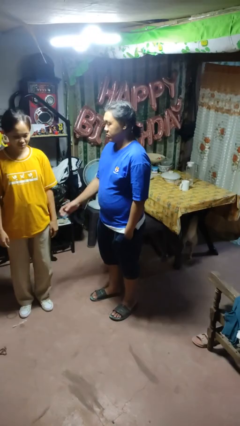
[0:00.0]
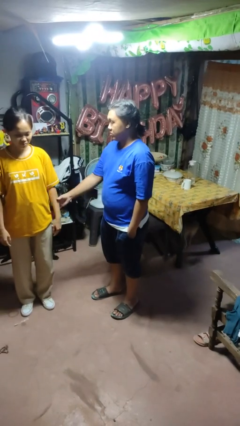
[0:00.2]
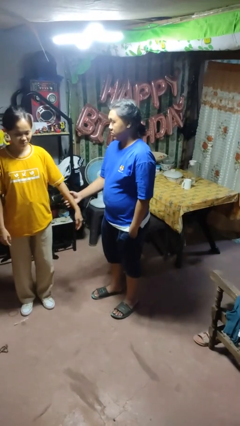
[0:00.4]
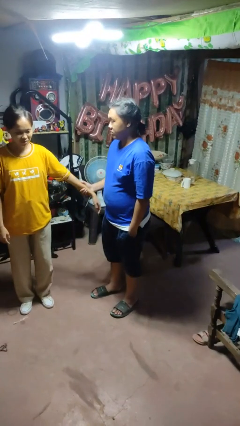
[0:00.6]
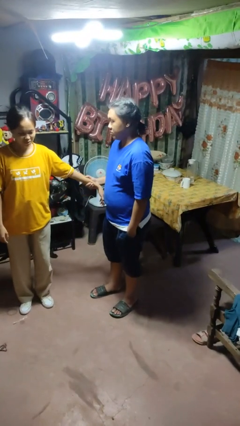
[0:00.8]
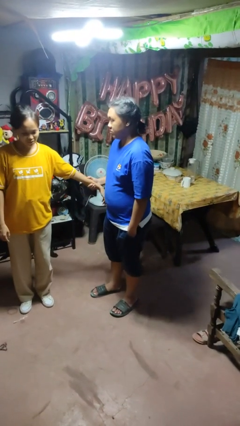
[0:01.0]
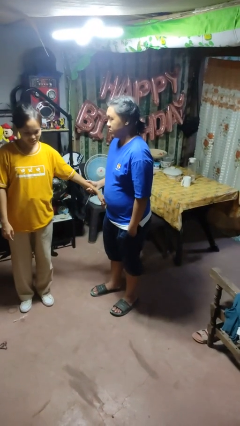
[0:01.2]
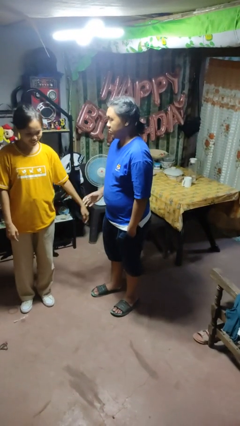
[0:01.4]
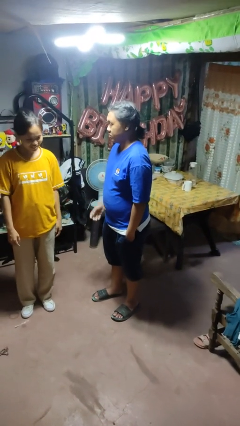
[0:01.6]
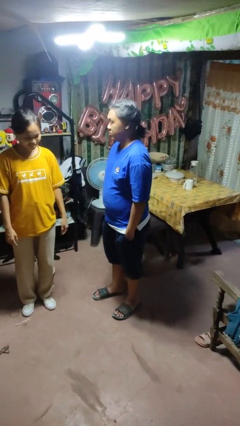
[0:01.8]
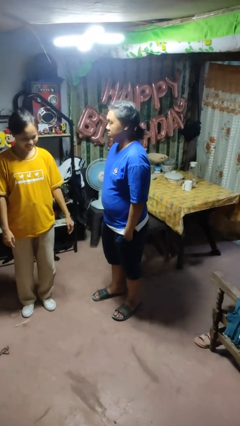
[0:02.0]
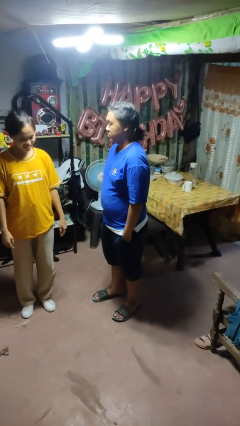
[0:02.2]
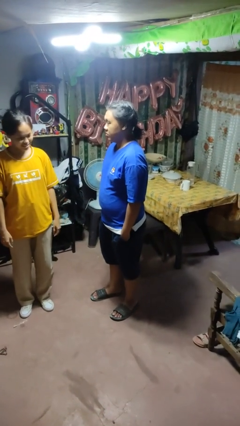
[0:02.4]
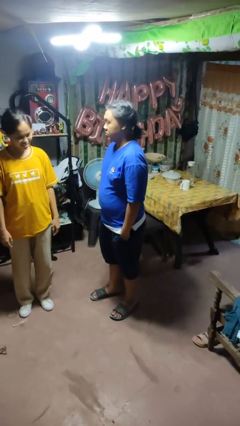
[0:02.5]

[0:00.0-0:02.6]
person grabs person by forearm

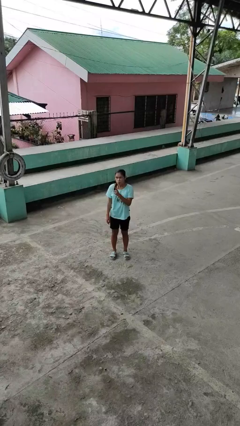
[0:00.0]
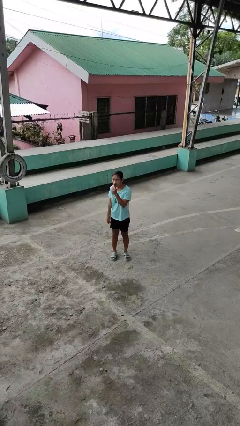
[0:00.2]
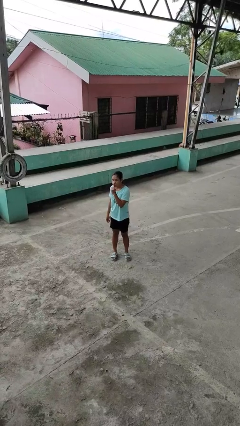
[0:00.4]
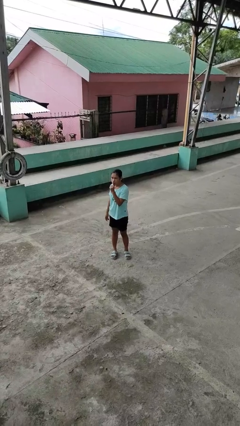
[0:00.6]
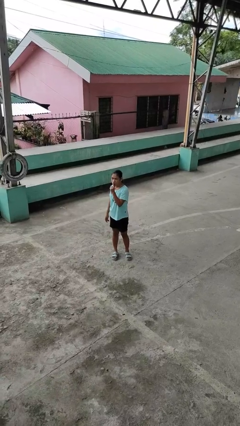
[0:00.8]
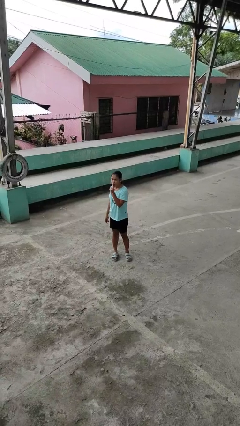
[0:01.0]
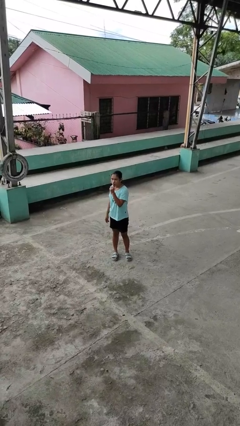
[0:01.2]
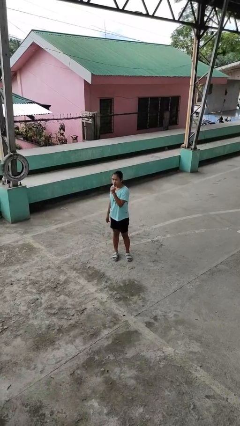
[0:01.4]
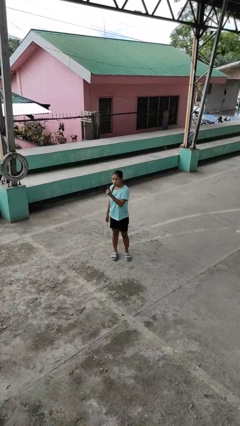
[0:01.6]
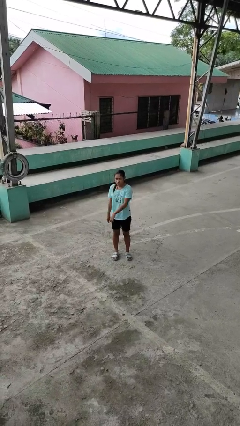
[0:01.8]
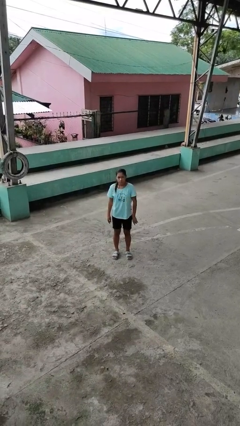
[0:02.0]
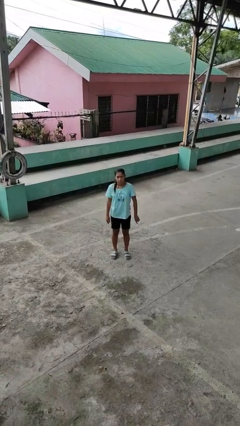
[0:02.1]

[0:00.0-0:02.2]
person gestures be quiet

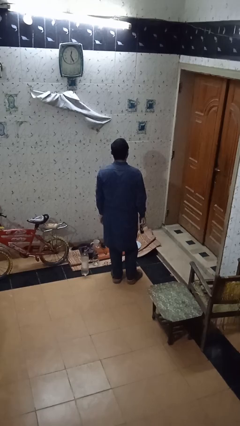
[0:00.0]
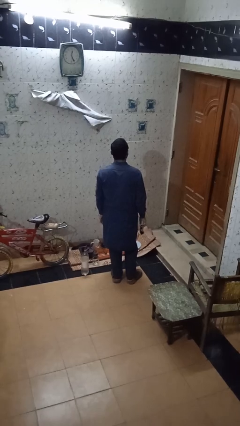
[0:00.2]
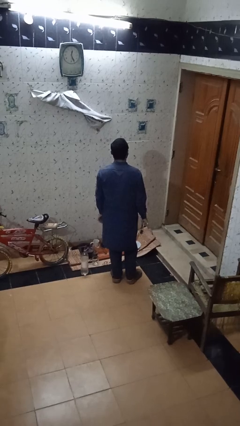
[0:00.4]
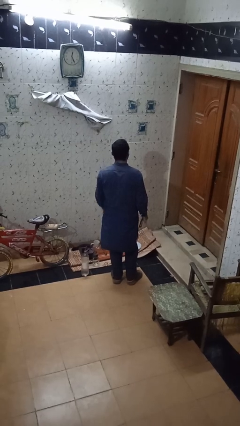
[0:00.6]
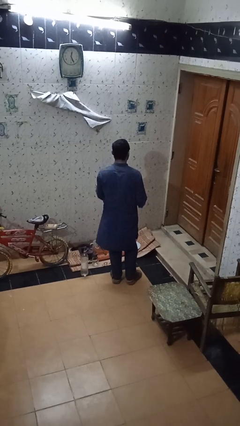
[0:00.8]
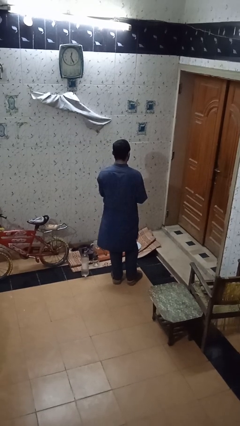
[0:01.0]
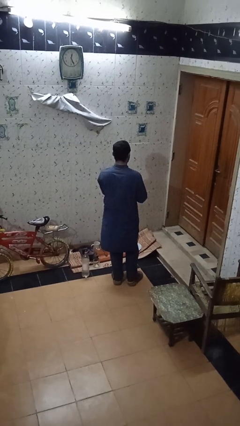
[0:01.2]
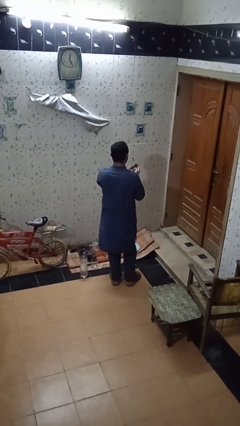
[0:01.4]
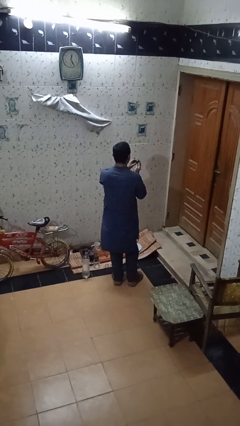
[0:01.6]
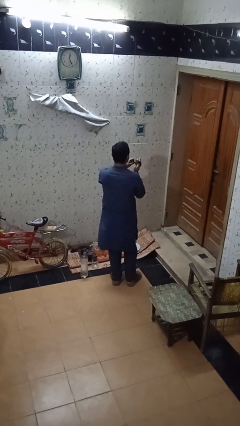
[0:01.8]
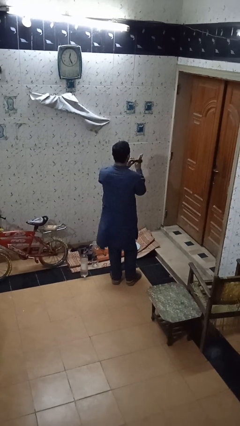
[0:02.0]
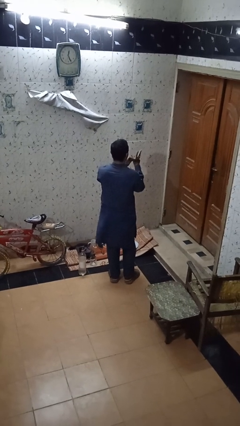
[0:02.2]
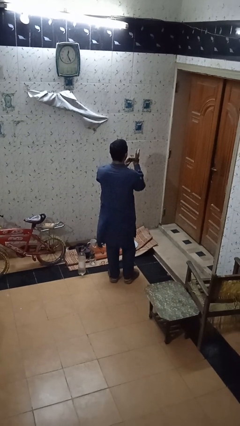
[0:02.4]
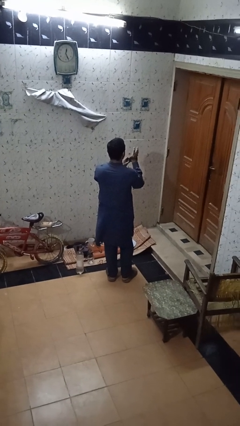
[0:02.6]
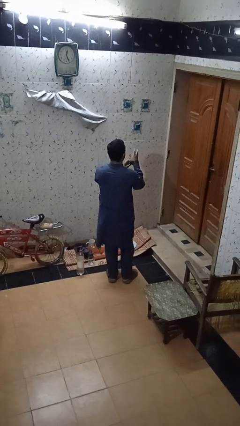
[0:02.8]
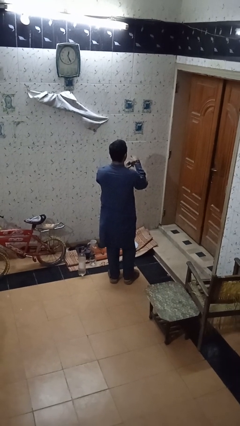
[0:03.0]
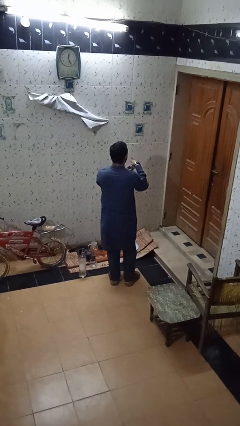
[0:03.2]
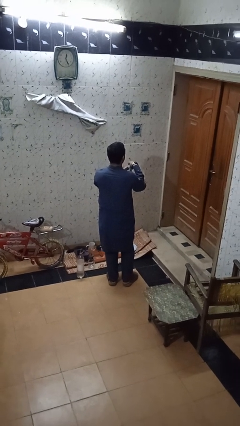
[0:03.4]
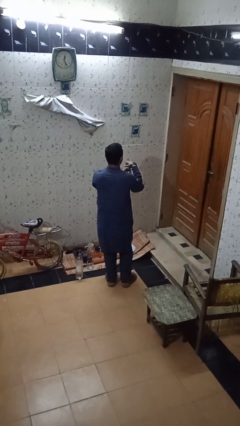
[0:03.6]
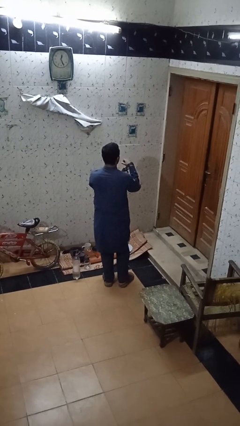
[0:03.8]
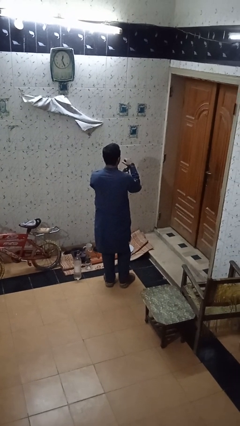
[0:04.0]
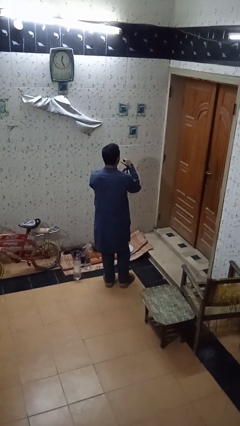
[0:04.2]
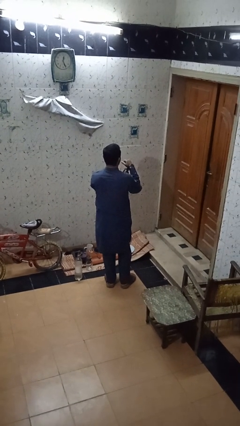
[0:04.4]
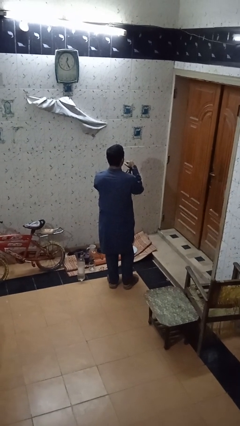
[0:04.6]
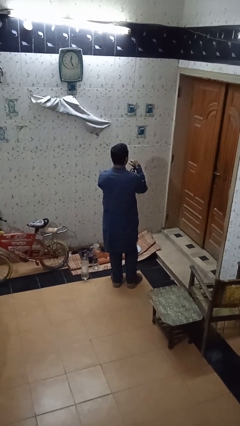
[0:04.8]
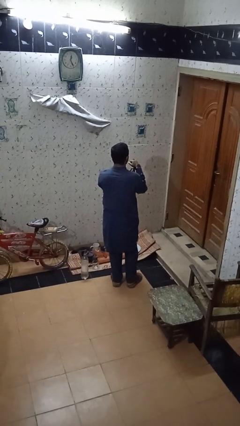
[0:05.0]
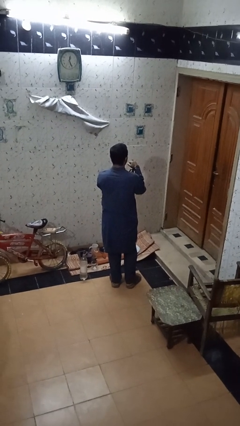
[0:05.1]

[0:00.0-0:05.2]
person puts on wristwatch

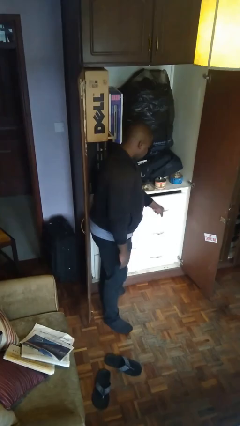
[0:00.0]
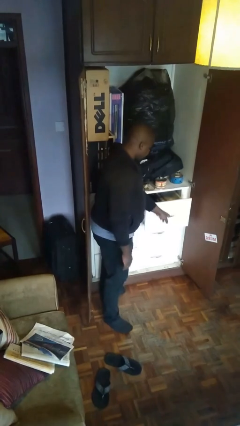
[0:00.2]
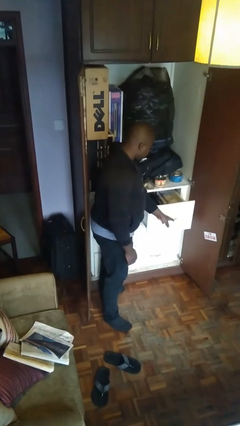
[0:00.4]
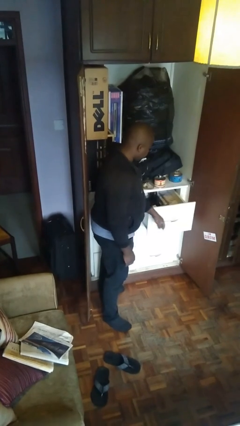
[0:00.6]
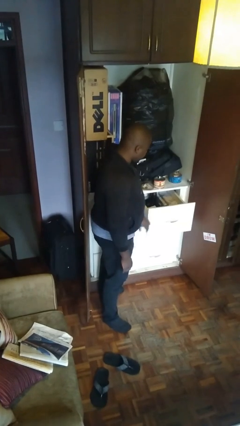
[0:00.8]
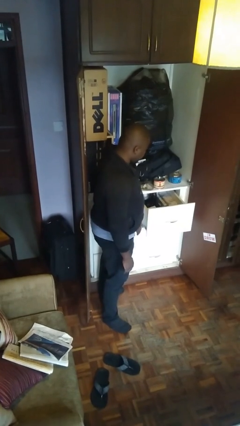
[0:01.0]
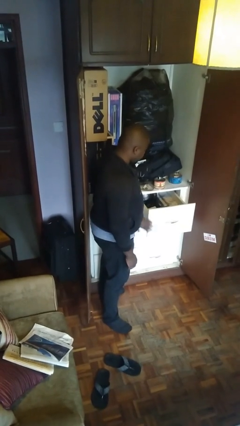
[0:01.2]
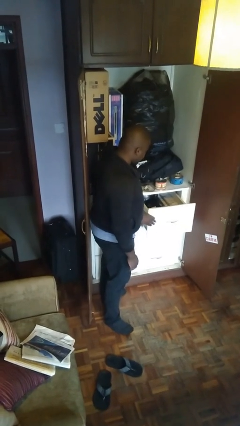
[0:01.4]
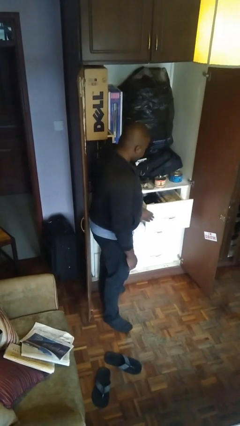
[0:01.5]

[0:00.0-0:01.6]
person opens dresser drawer

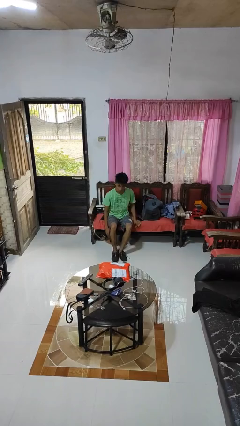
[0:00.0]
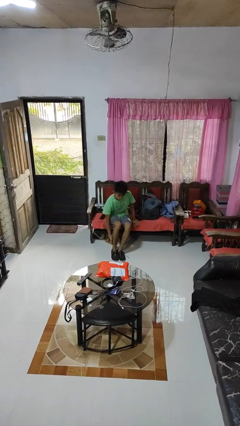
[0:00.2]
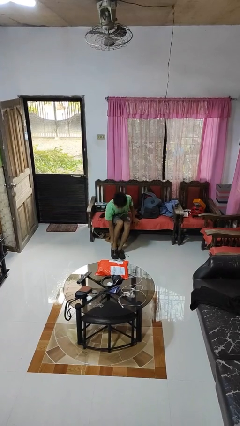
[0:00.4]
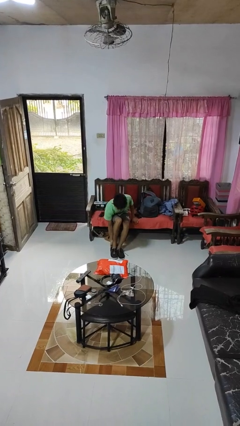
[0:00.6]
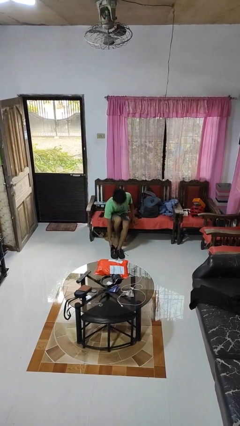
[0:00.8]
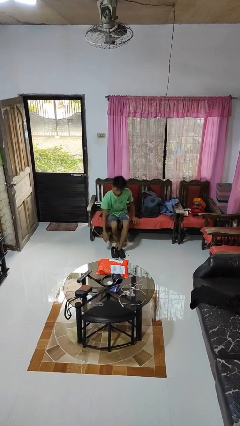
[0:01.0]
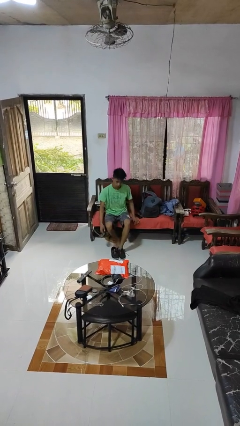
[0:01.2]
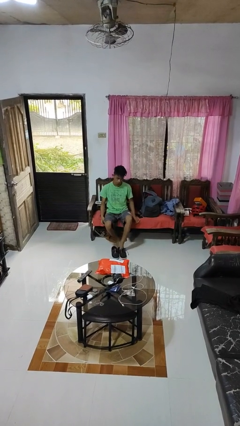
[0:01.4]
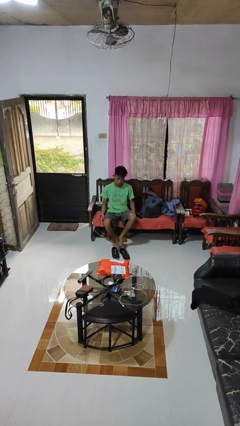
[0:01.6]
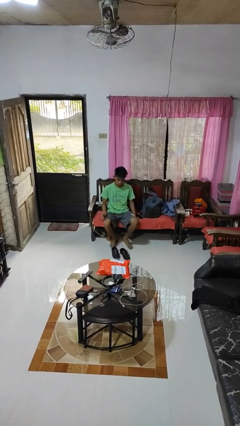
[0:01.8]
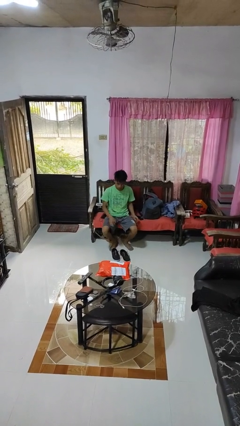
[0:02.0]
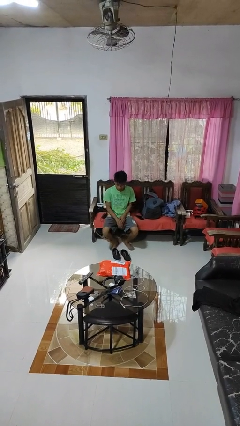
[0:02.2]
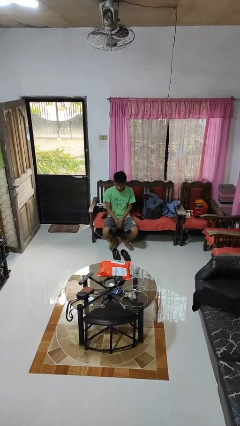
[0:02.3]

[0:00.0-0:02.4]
person takes off shoes

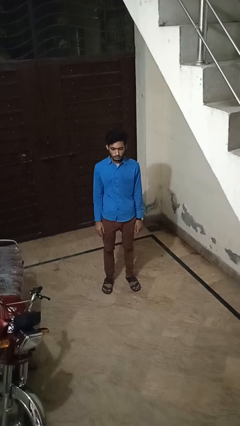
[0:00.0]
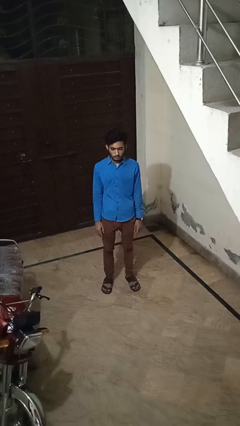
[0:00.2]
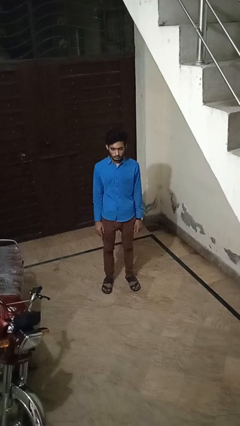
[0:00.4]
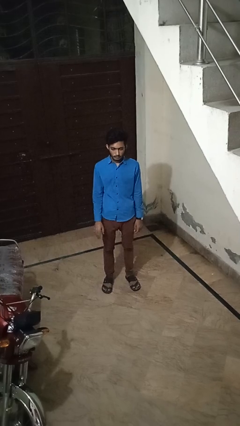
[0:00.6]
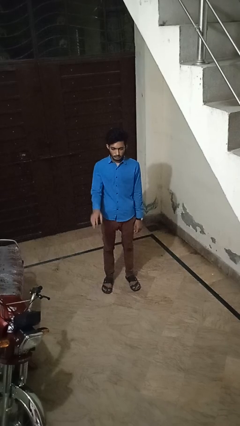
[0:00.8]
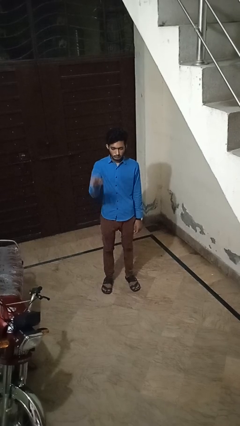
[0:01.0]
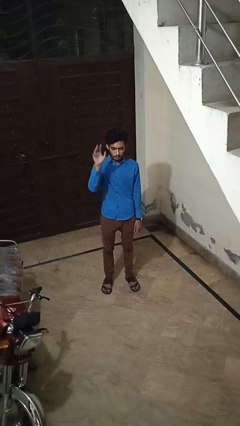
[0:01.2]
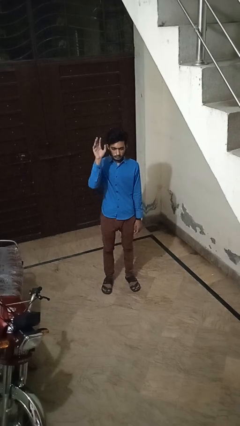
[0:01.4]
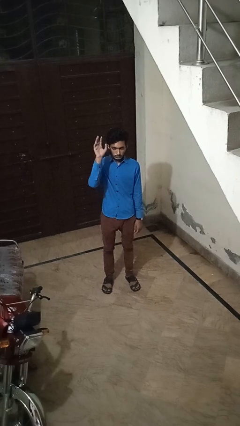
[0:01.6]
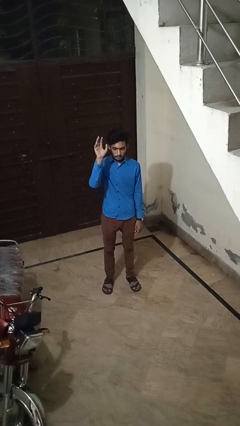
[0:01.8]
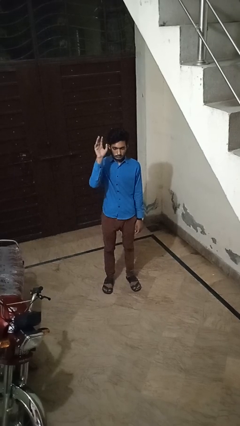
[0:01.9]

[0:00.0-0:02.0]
person gestures raise hand

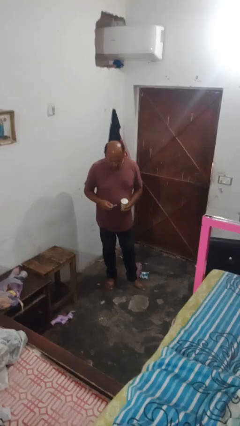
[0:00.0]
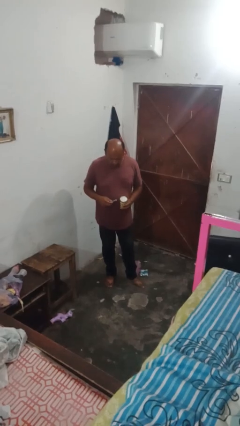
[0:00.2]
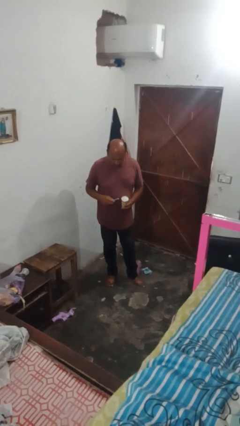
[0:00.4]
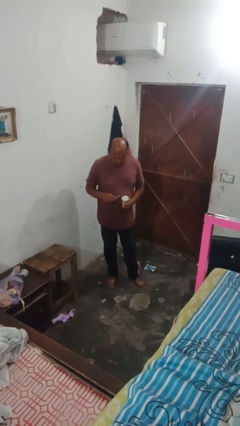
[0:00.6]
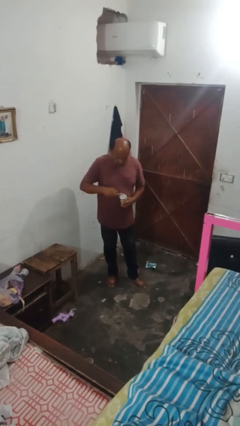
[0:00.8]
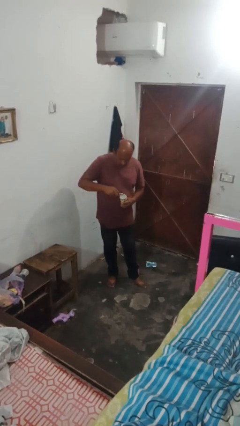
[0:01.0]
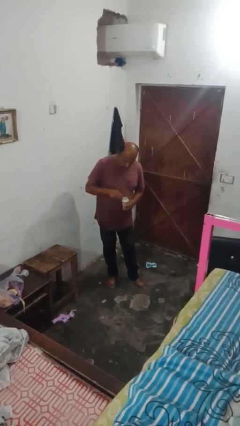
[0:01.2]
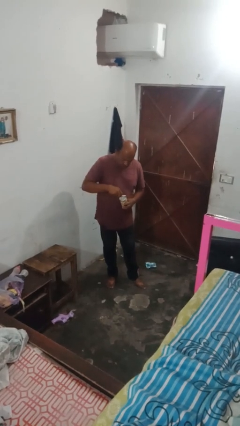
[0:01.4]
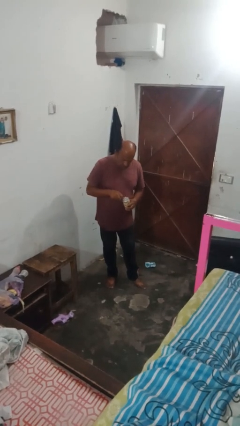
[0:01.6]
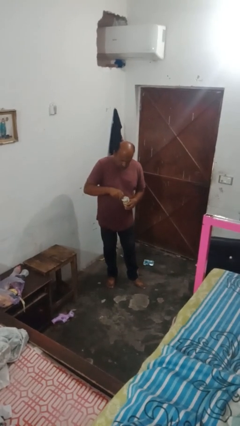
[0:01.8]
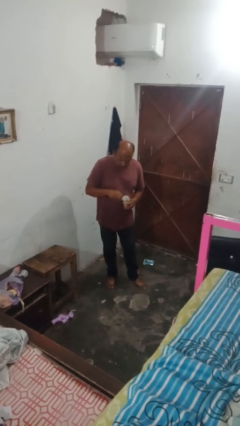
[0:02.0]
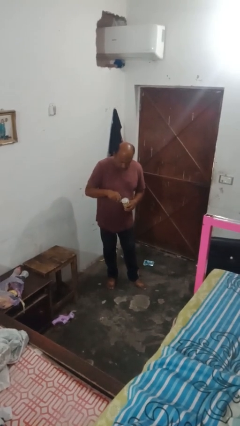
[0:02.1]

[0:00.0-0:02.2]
person opens can with can opener
